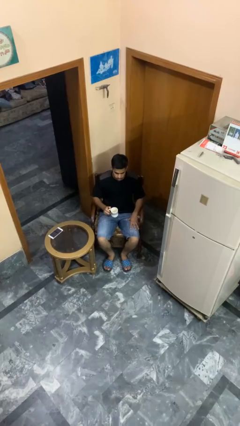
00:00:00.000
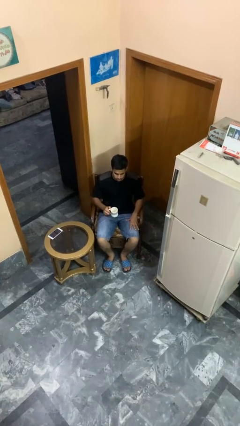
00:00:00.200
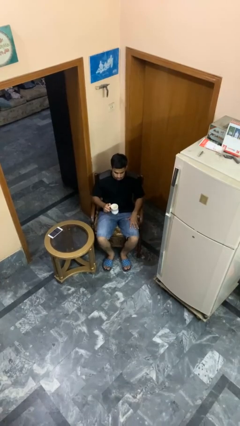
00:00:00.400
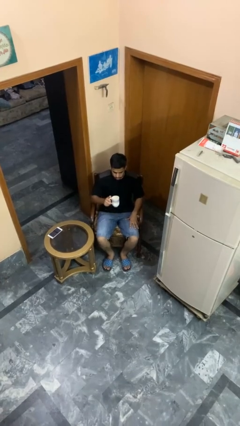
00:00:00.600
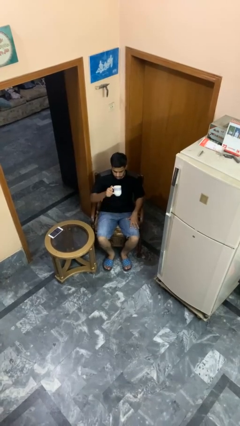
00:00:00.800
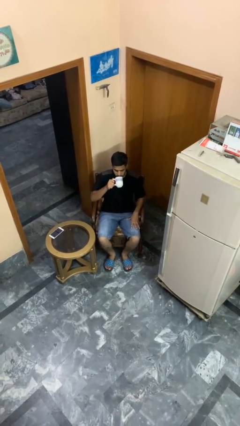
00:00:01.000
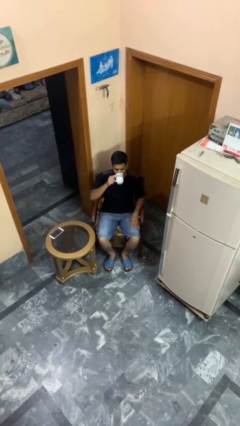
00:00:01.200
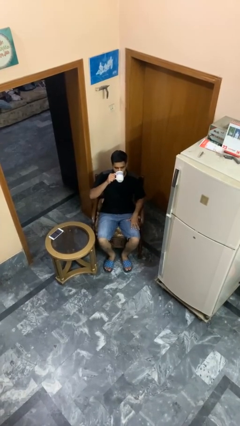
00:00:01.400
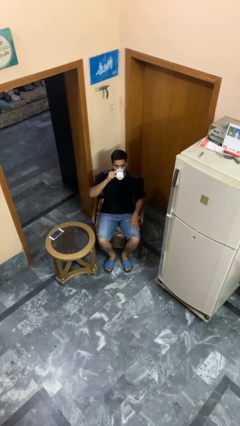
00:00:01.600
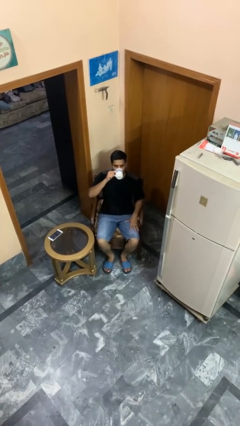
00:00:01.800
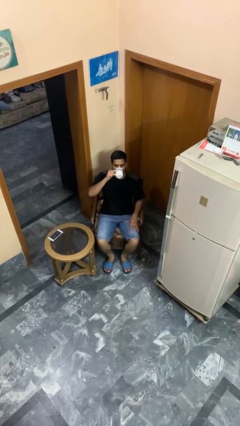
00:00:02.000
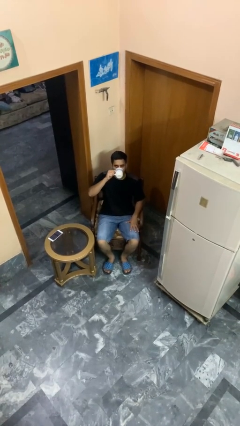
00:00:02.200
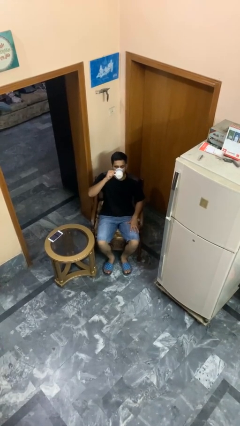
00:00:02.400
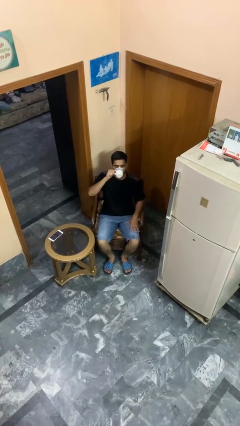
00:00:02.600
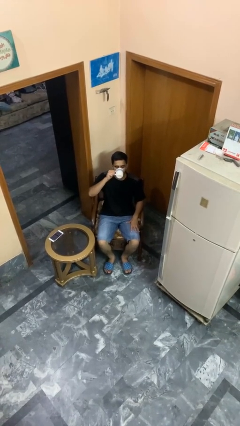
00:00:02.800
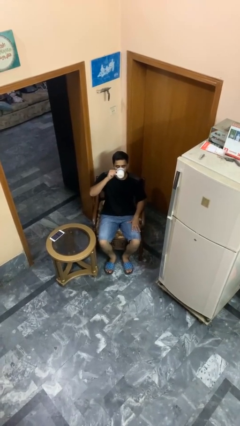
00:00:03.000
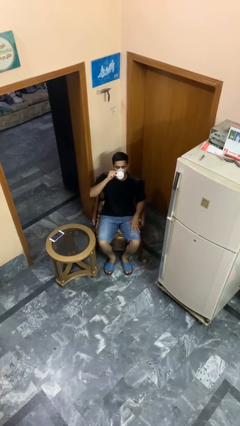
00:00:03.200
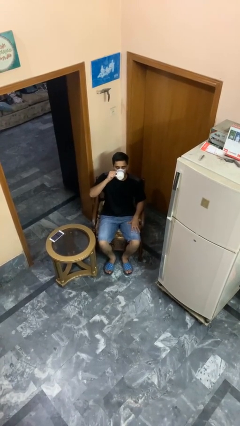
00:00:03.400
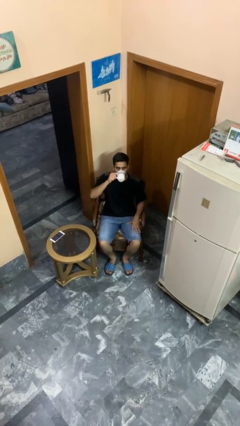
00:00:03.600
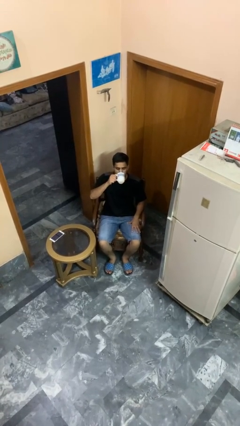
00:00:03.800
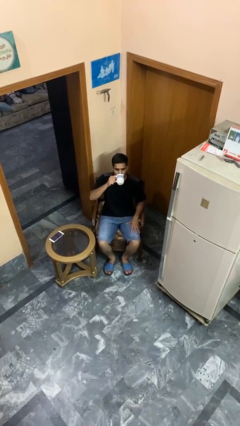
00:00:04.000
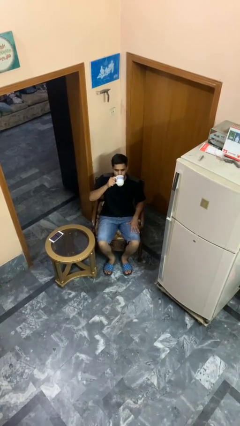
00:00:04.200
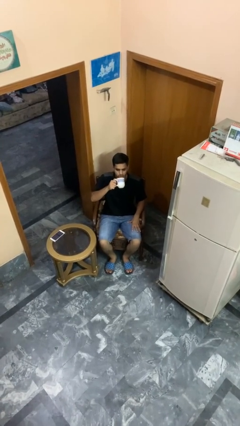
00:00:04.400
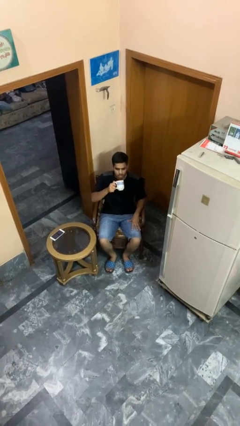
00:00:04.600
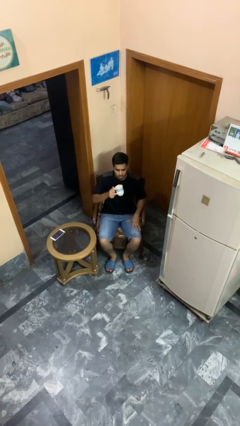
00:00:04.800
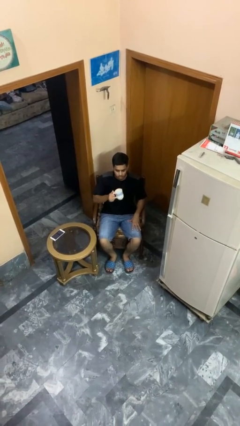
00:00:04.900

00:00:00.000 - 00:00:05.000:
person drinks from mug

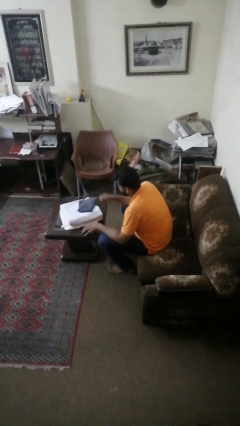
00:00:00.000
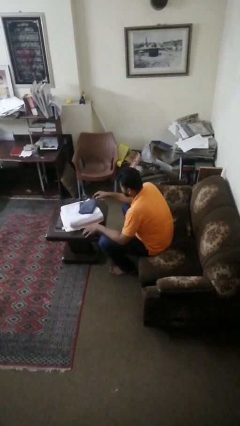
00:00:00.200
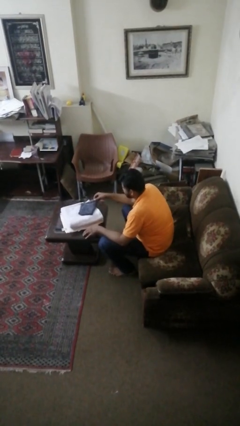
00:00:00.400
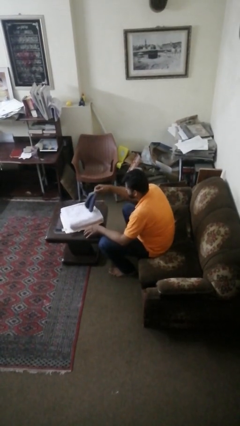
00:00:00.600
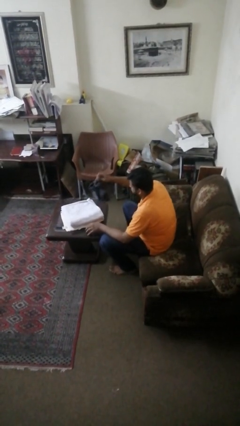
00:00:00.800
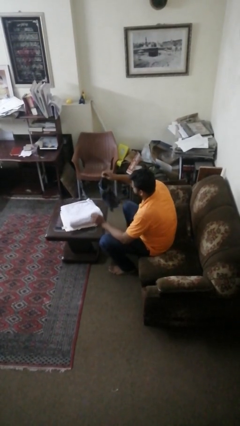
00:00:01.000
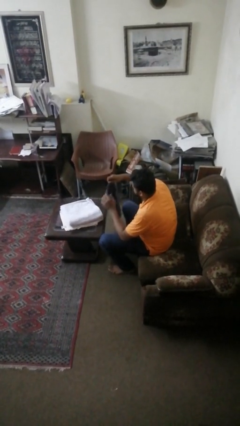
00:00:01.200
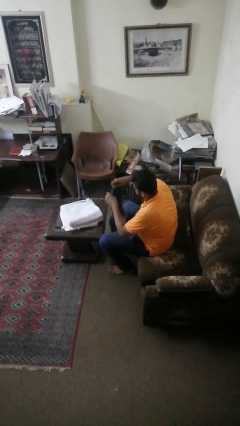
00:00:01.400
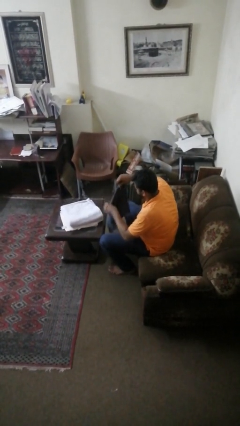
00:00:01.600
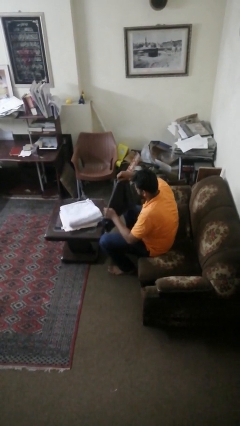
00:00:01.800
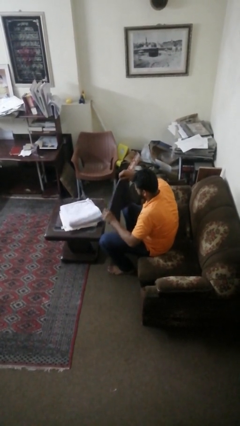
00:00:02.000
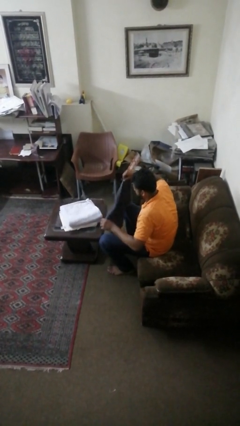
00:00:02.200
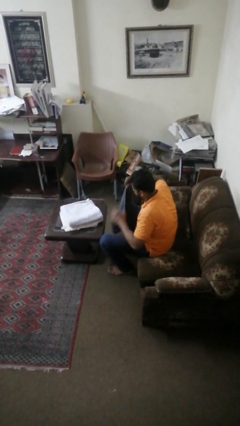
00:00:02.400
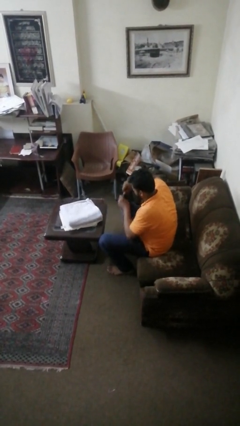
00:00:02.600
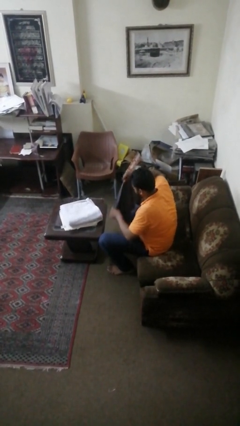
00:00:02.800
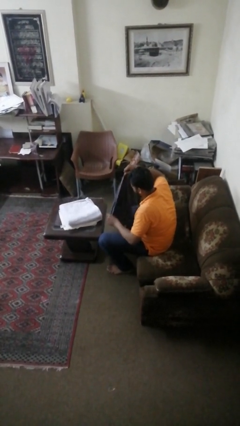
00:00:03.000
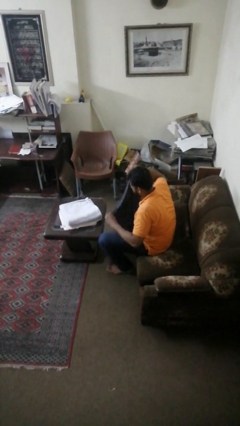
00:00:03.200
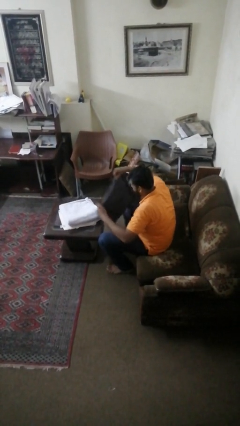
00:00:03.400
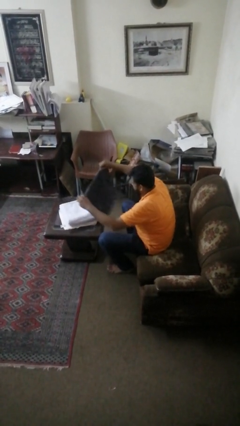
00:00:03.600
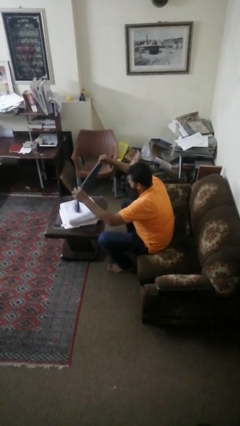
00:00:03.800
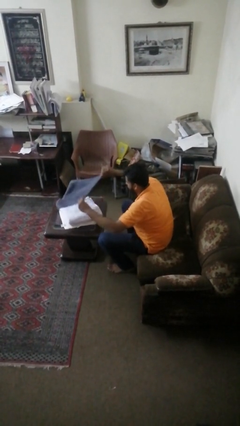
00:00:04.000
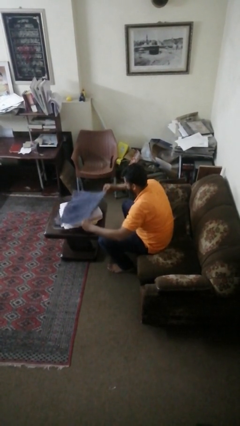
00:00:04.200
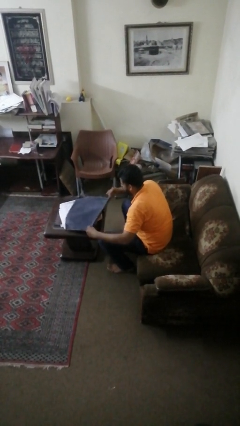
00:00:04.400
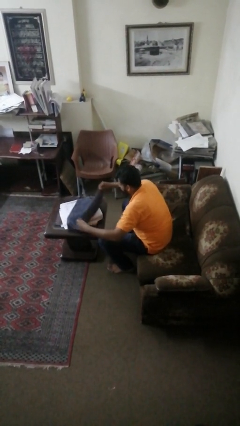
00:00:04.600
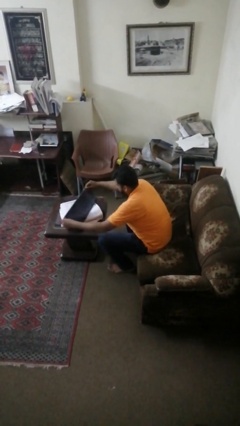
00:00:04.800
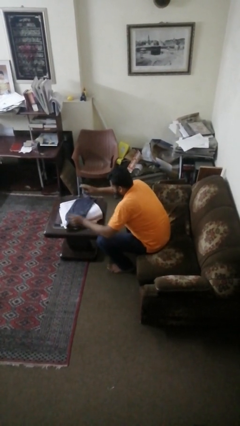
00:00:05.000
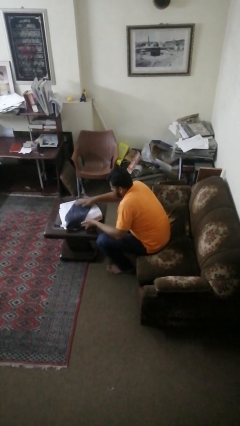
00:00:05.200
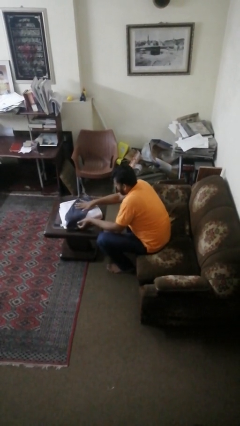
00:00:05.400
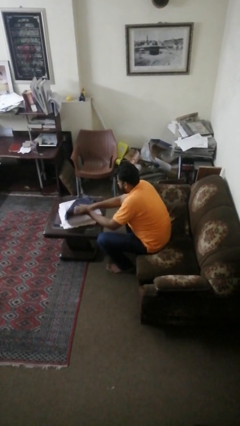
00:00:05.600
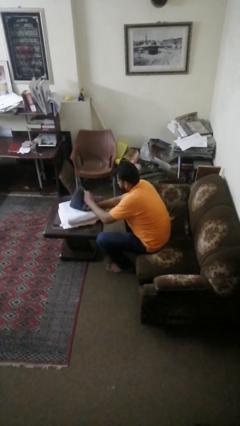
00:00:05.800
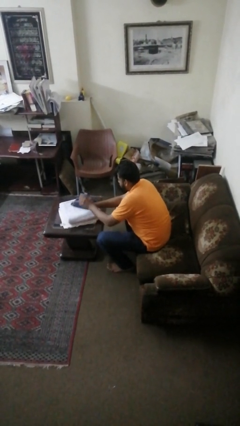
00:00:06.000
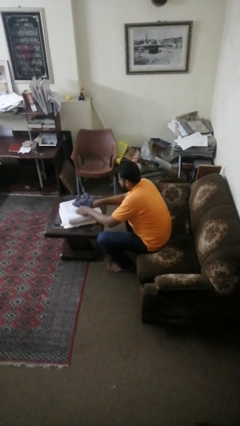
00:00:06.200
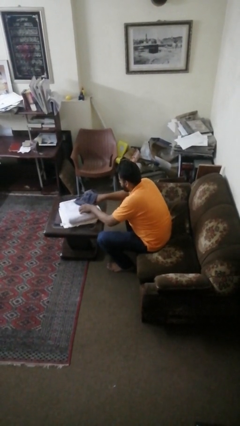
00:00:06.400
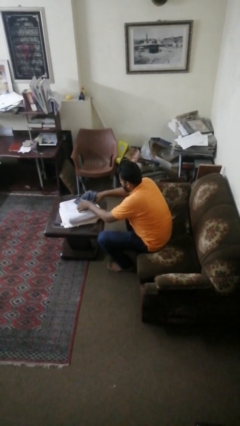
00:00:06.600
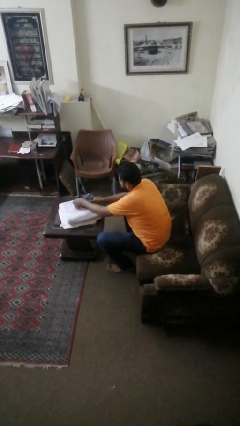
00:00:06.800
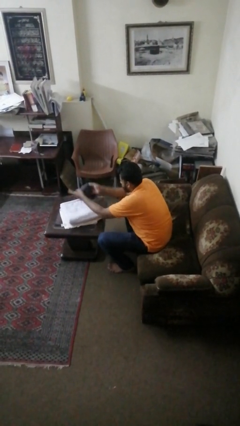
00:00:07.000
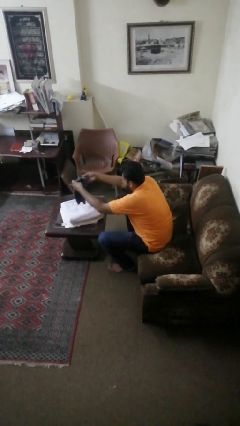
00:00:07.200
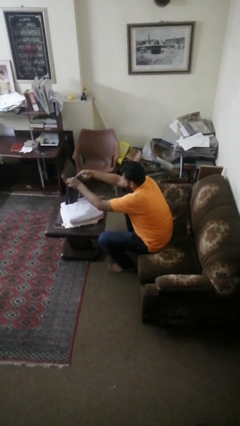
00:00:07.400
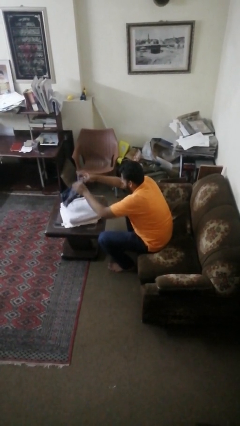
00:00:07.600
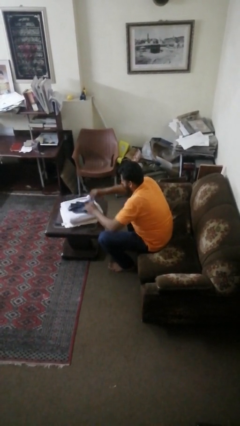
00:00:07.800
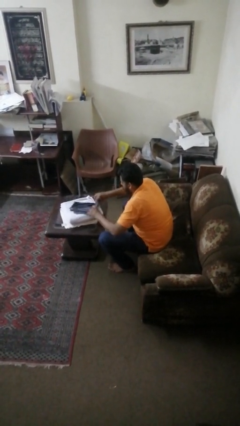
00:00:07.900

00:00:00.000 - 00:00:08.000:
person folds towel

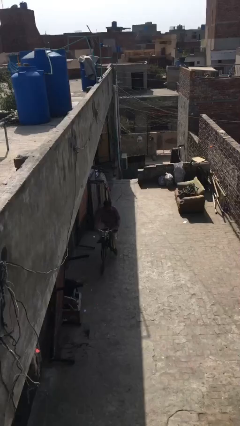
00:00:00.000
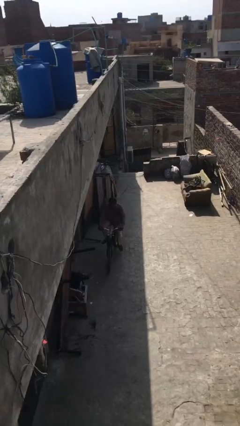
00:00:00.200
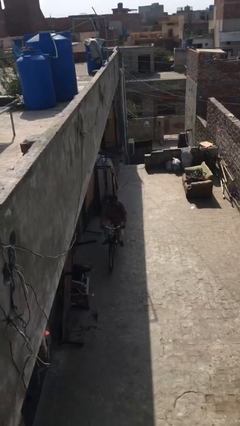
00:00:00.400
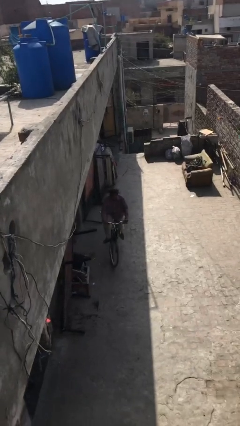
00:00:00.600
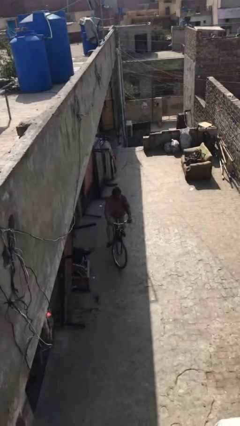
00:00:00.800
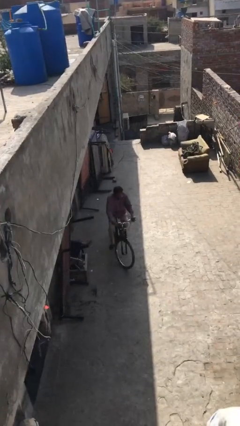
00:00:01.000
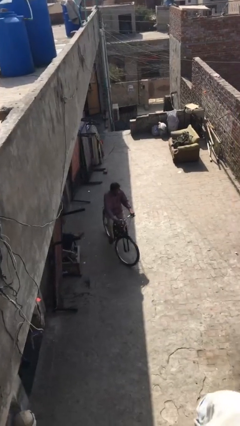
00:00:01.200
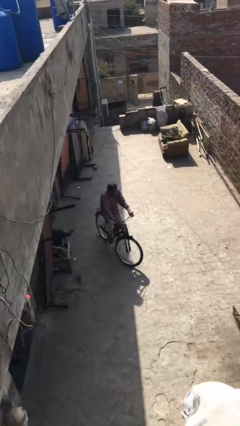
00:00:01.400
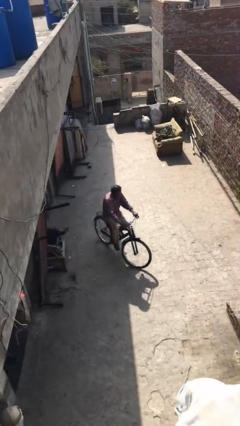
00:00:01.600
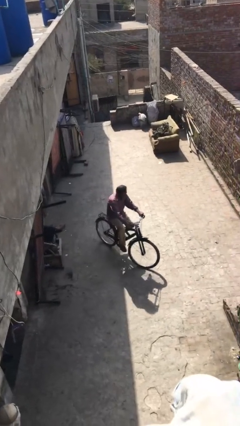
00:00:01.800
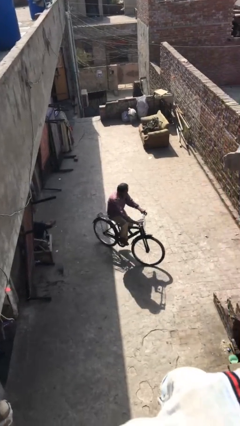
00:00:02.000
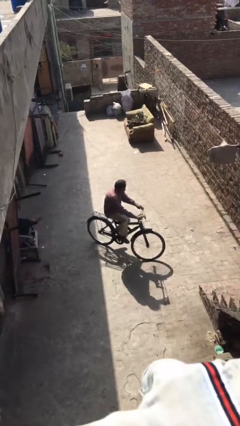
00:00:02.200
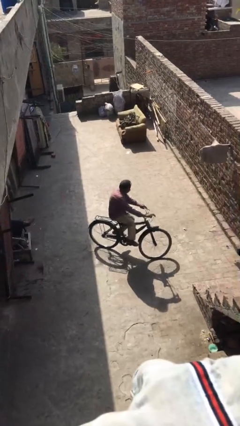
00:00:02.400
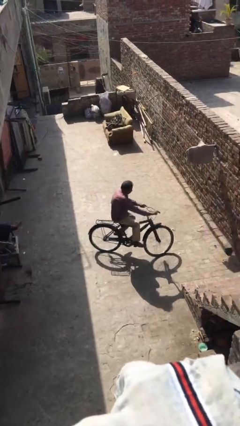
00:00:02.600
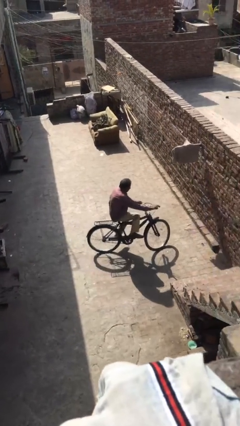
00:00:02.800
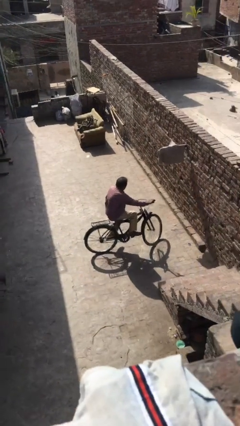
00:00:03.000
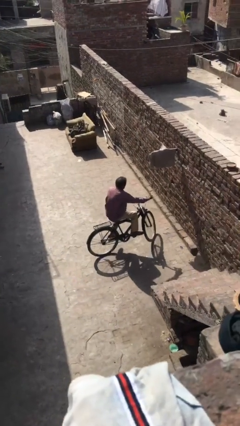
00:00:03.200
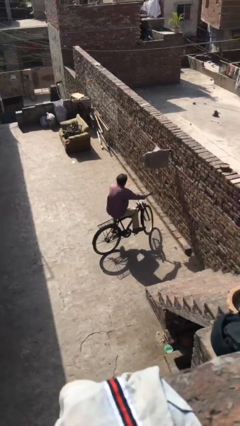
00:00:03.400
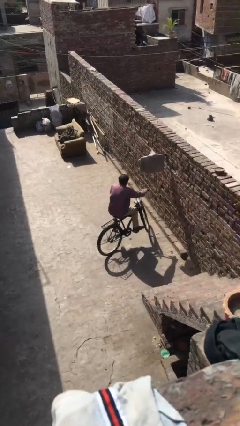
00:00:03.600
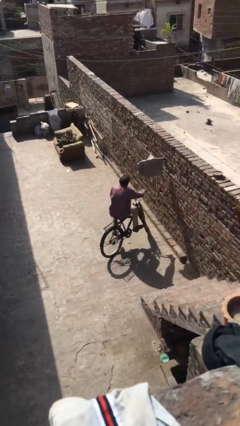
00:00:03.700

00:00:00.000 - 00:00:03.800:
person rides bicycle

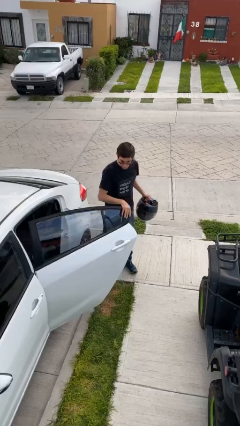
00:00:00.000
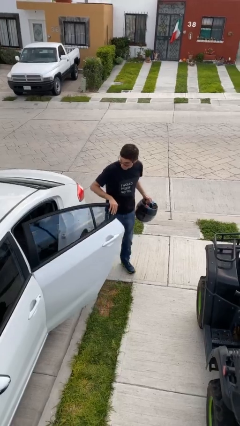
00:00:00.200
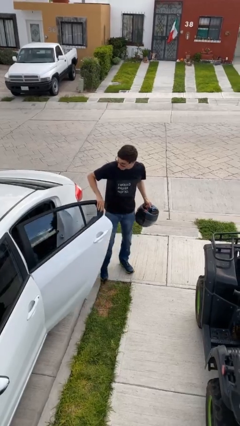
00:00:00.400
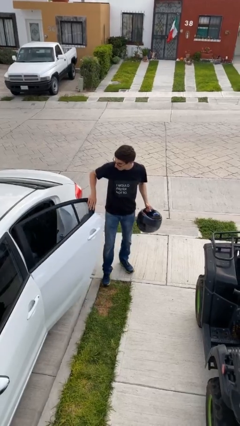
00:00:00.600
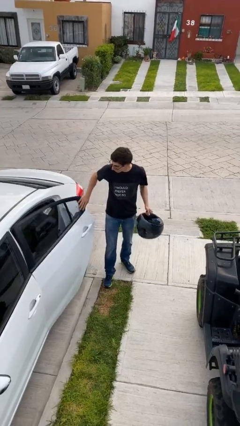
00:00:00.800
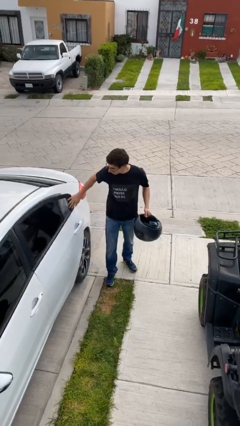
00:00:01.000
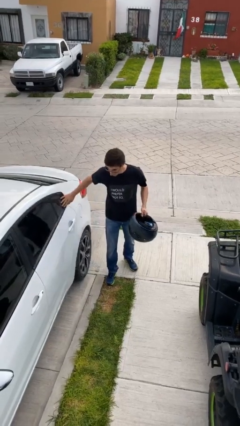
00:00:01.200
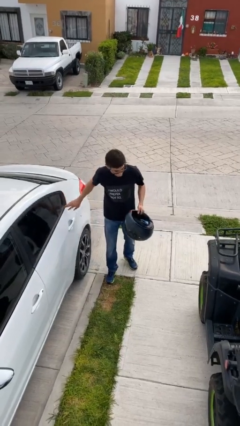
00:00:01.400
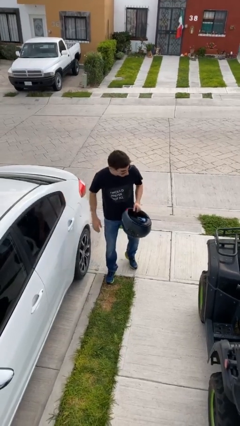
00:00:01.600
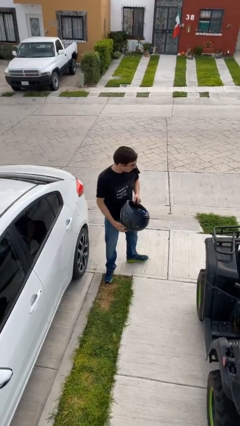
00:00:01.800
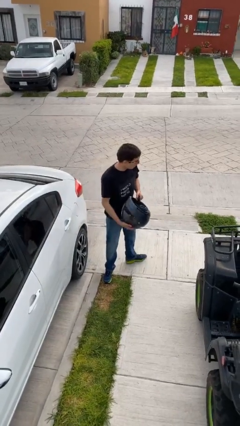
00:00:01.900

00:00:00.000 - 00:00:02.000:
person closes car door
